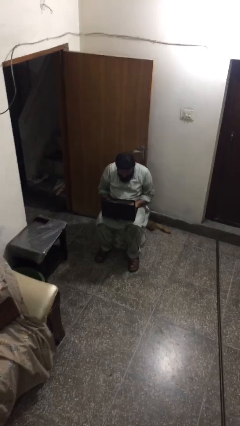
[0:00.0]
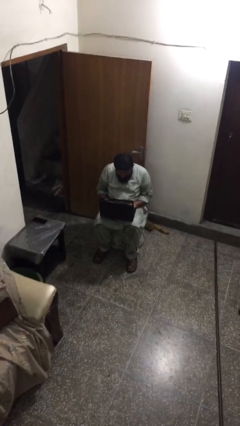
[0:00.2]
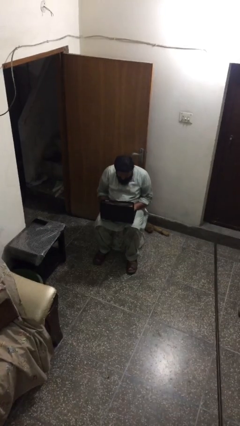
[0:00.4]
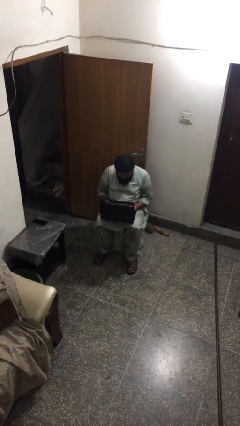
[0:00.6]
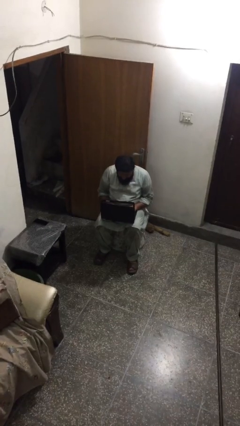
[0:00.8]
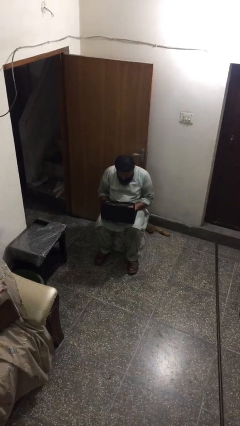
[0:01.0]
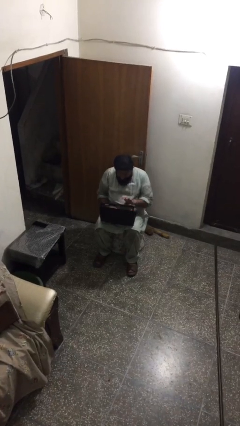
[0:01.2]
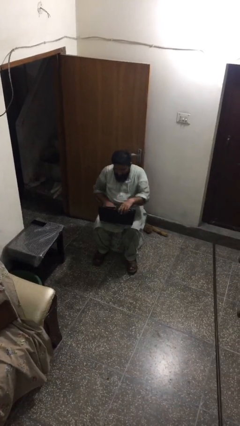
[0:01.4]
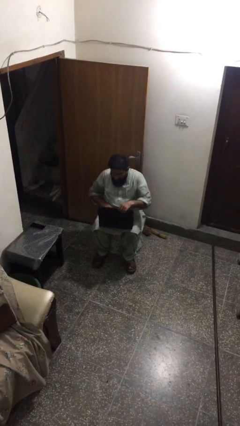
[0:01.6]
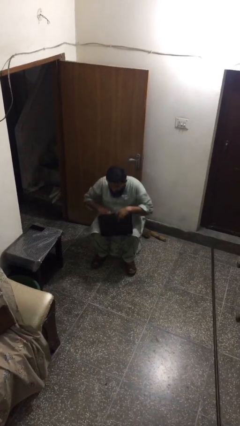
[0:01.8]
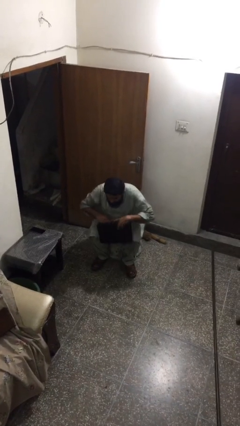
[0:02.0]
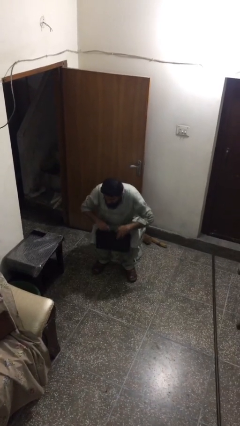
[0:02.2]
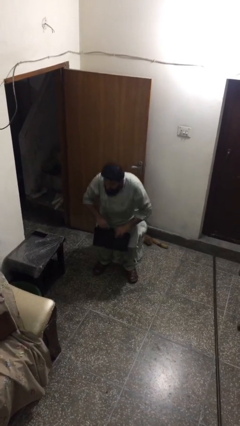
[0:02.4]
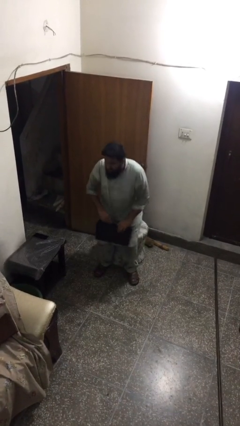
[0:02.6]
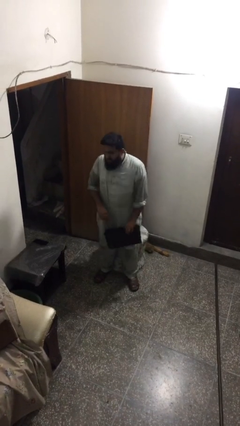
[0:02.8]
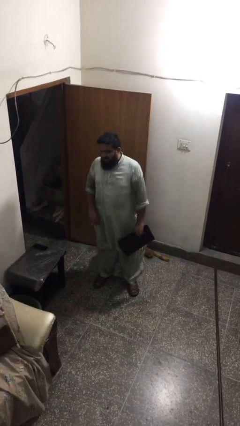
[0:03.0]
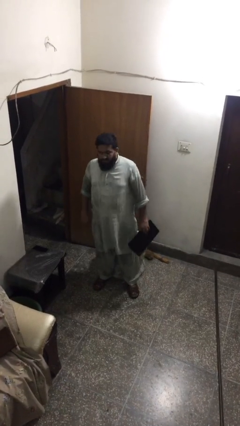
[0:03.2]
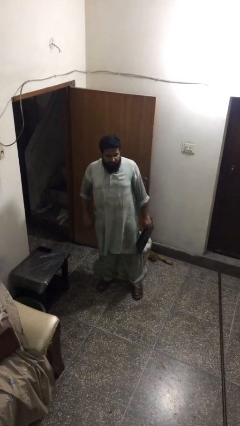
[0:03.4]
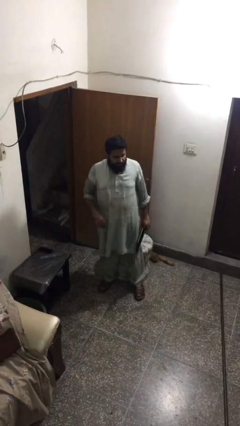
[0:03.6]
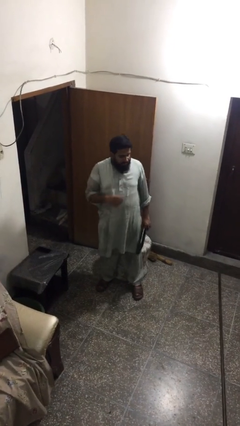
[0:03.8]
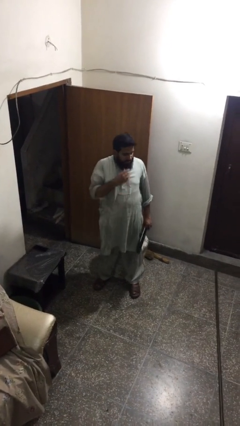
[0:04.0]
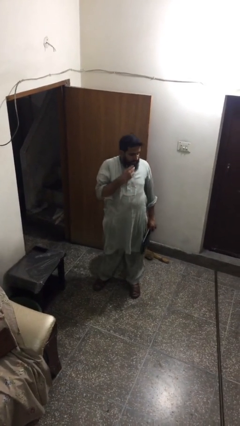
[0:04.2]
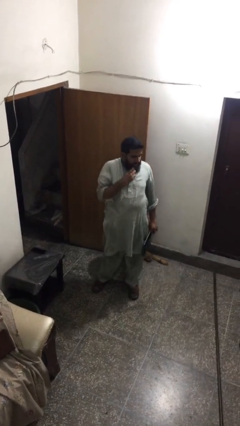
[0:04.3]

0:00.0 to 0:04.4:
person stands up

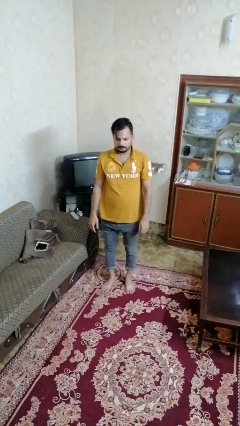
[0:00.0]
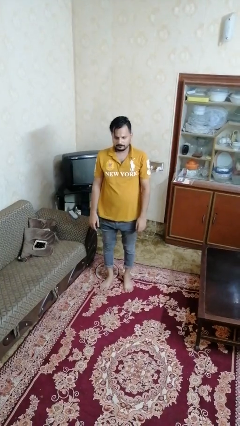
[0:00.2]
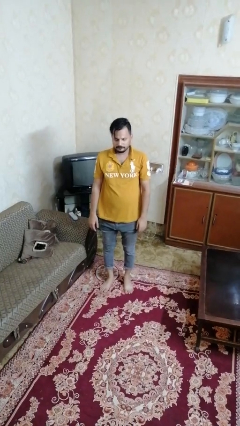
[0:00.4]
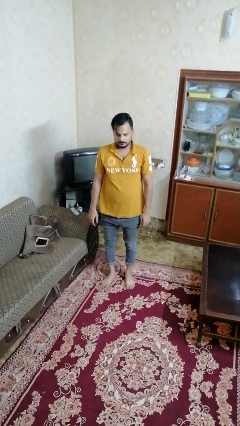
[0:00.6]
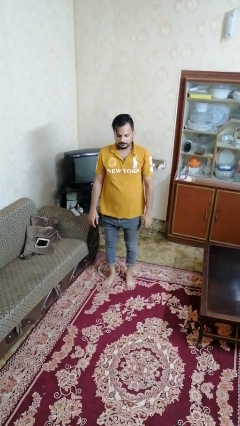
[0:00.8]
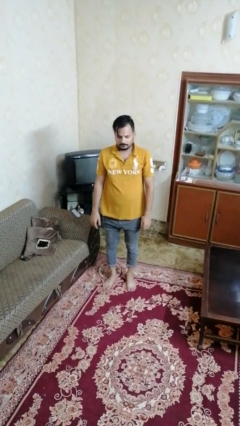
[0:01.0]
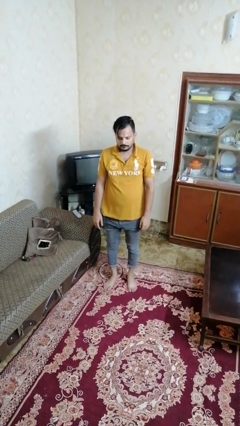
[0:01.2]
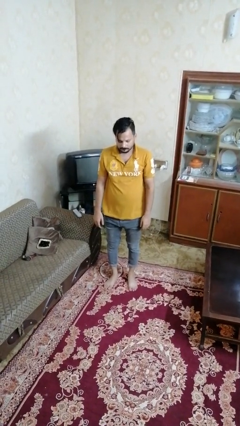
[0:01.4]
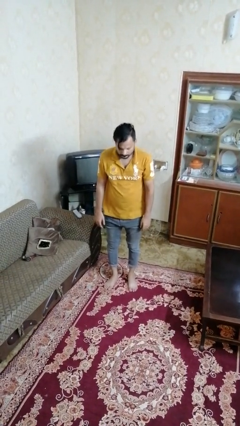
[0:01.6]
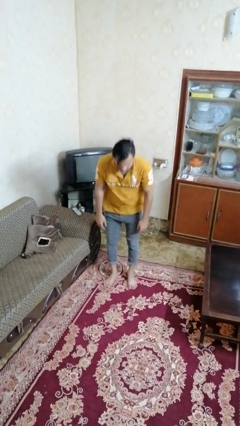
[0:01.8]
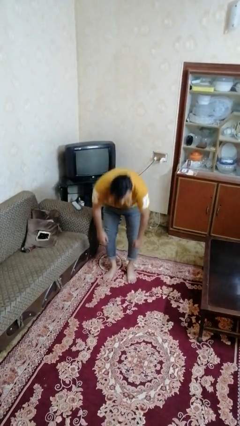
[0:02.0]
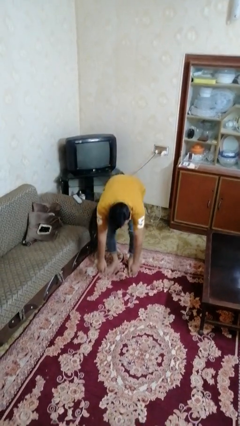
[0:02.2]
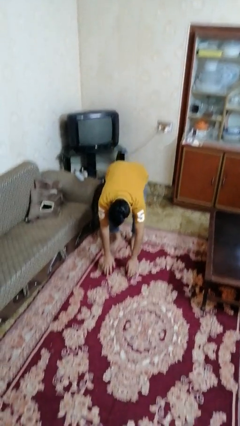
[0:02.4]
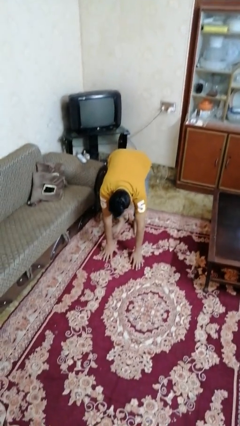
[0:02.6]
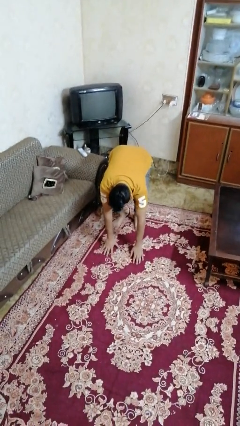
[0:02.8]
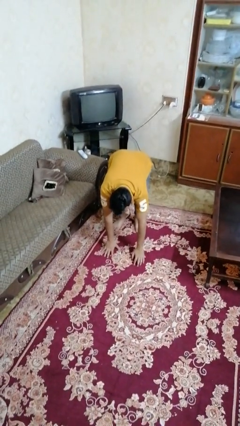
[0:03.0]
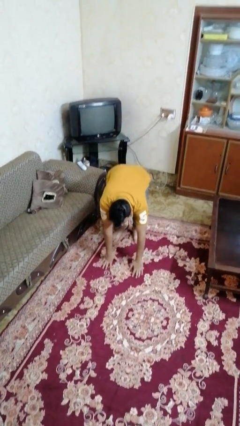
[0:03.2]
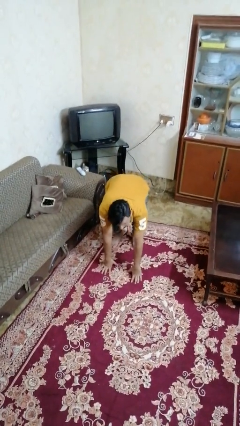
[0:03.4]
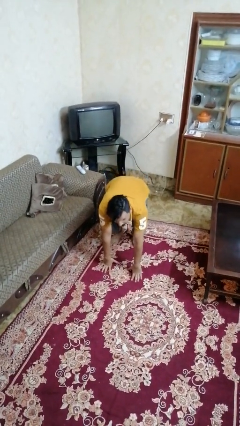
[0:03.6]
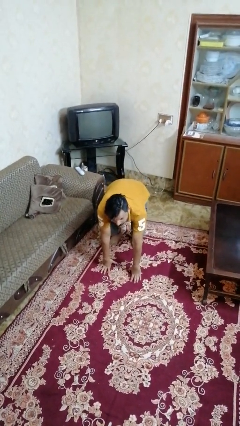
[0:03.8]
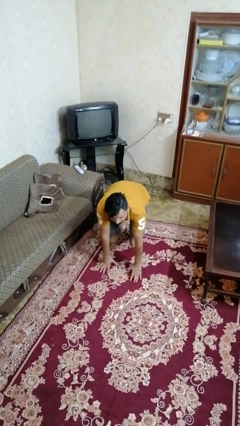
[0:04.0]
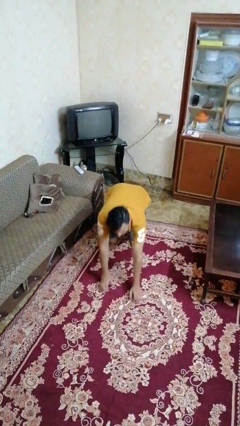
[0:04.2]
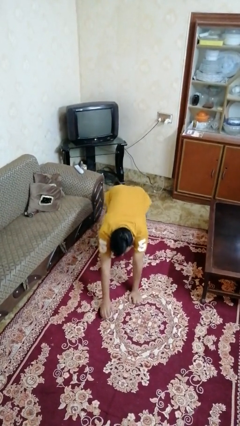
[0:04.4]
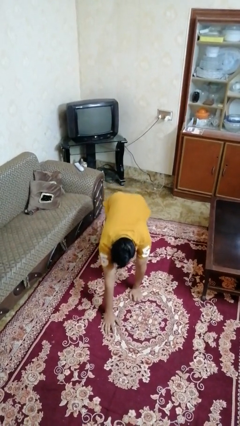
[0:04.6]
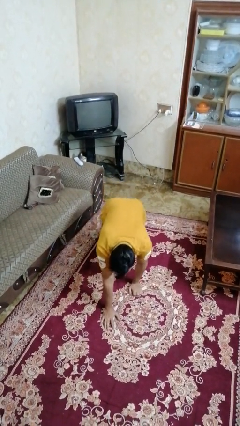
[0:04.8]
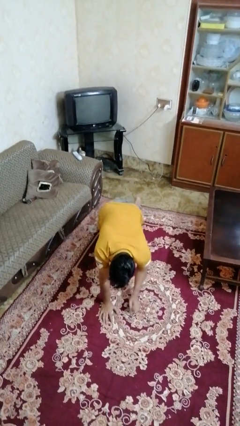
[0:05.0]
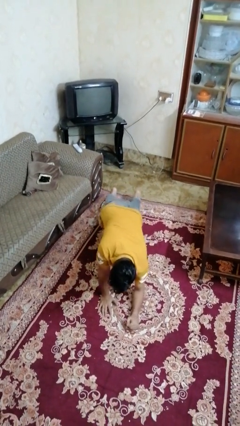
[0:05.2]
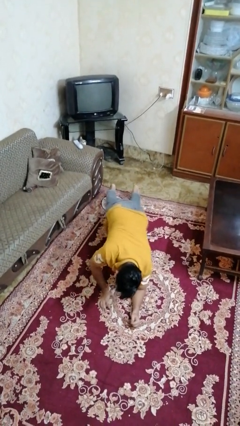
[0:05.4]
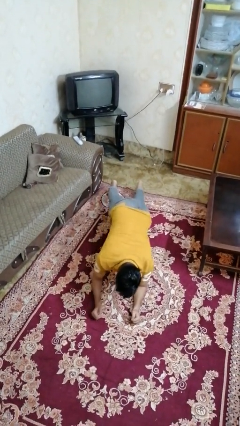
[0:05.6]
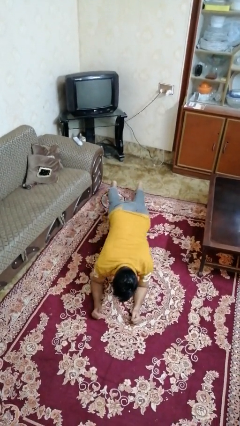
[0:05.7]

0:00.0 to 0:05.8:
person exercises with plank

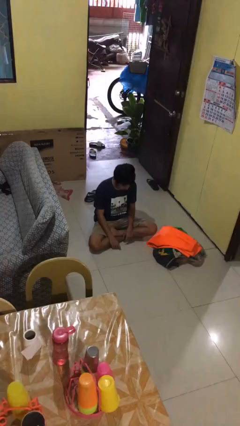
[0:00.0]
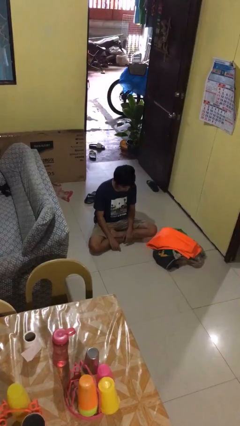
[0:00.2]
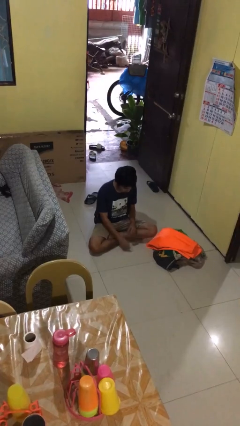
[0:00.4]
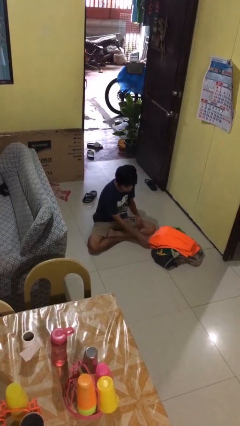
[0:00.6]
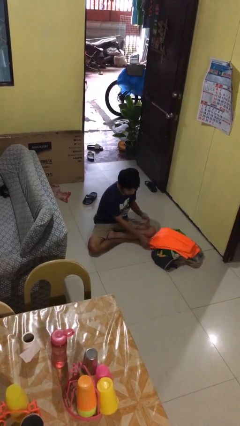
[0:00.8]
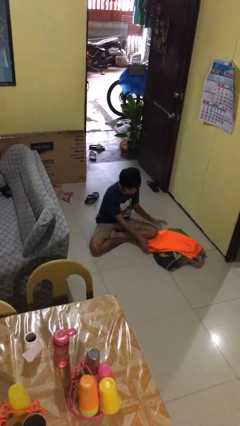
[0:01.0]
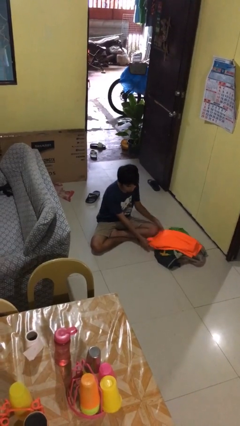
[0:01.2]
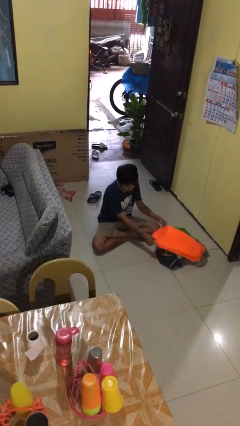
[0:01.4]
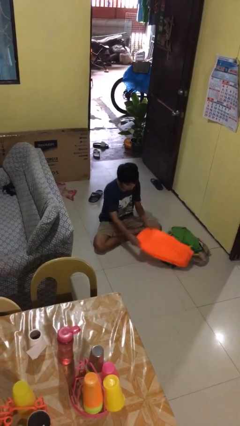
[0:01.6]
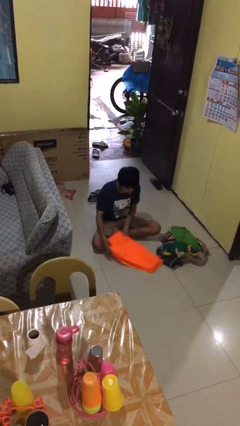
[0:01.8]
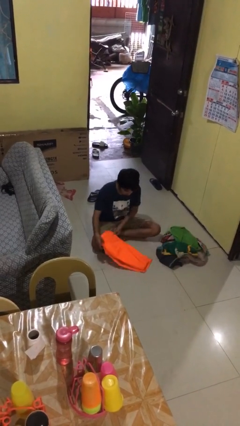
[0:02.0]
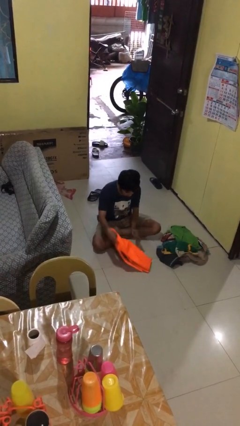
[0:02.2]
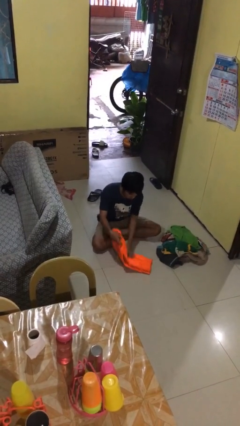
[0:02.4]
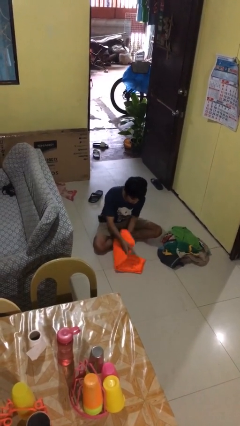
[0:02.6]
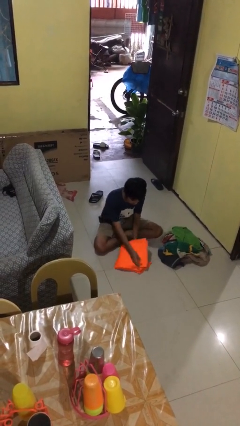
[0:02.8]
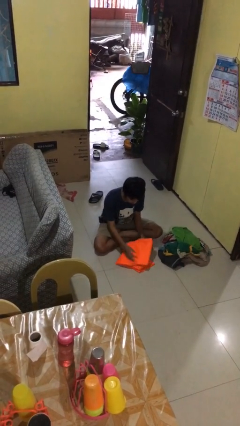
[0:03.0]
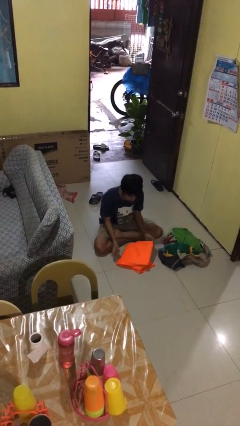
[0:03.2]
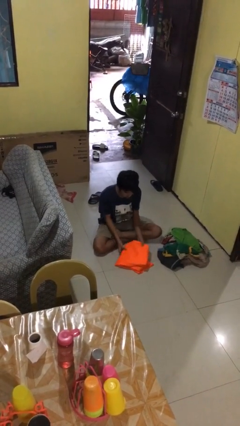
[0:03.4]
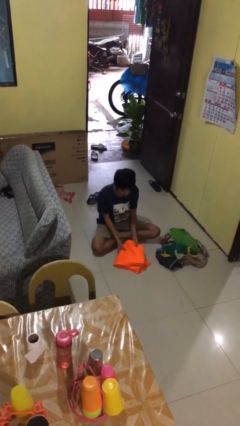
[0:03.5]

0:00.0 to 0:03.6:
person folds pants

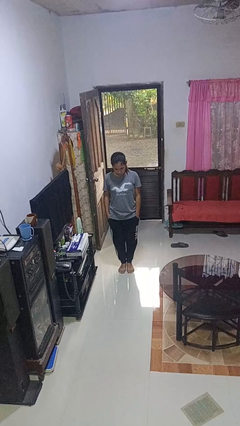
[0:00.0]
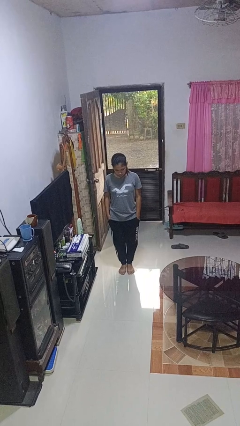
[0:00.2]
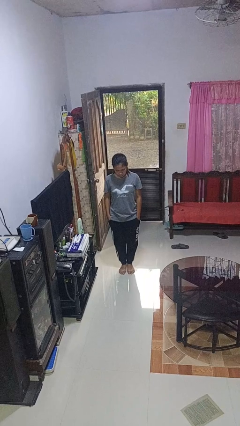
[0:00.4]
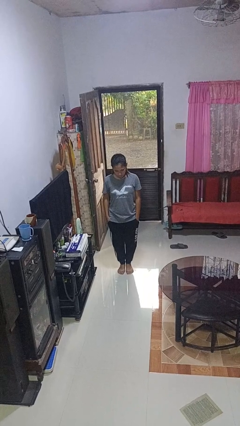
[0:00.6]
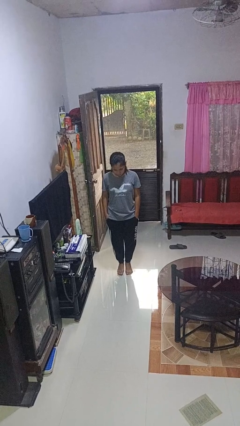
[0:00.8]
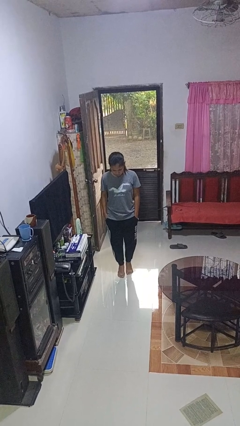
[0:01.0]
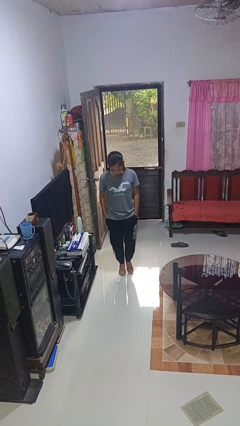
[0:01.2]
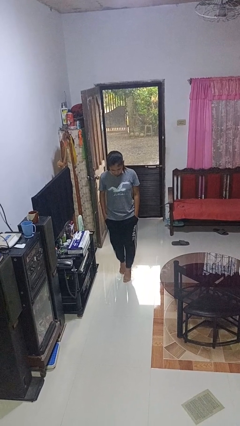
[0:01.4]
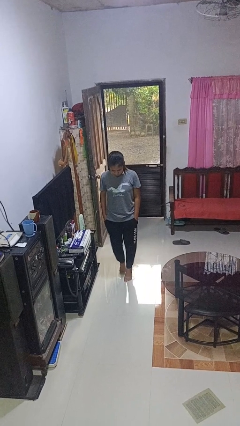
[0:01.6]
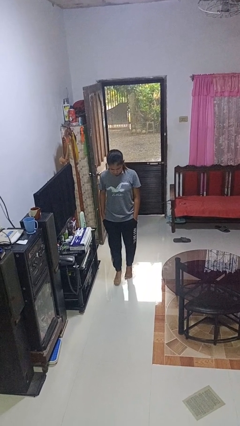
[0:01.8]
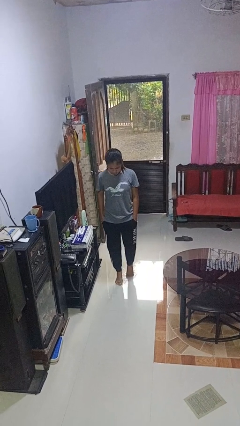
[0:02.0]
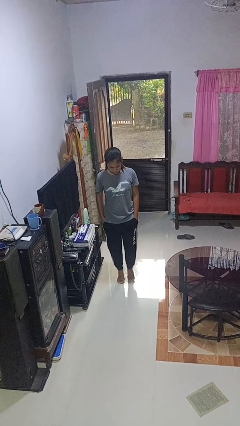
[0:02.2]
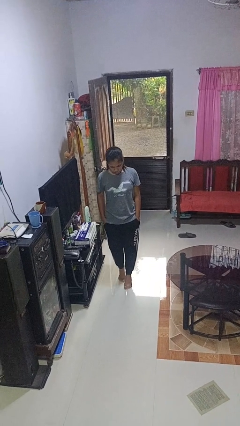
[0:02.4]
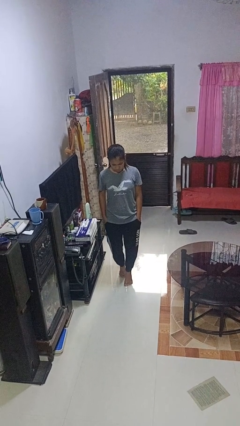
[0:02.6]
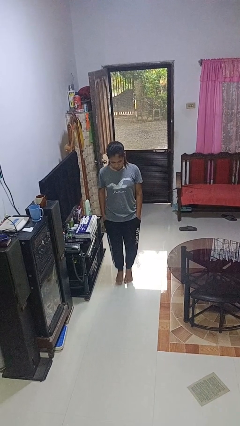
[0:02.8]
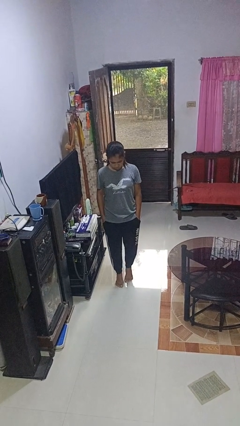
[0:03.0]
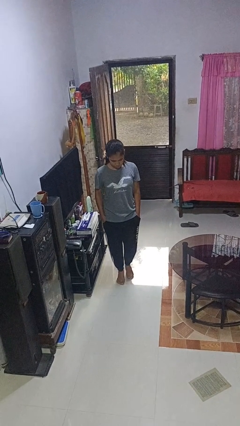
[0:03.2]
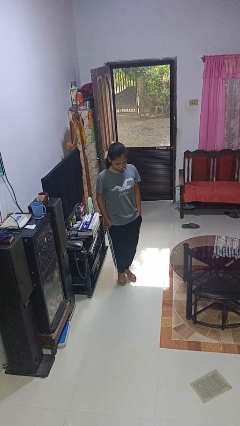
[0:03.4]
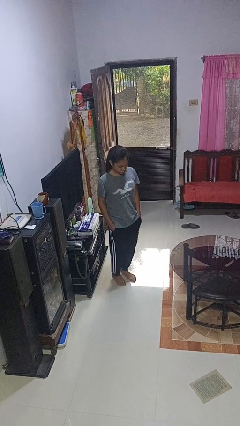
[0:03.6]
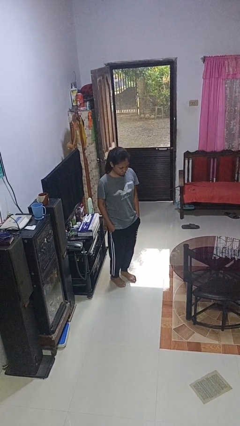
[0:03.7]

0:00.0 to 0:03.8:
person walks tiptoe
